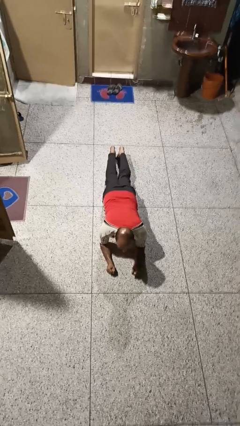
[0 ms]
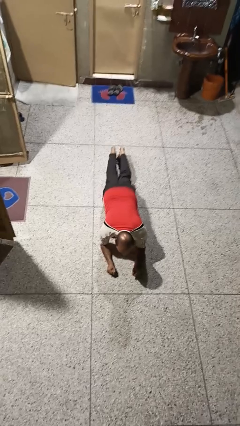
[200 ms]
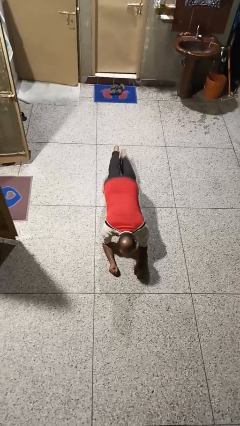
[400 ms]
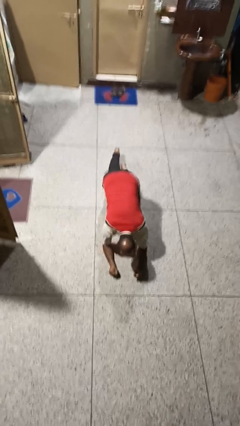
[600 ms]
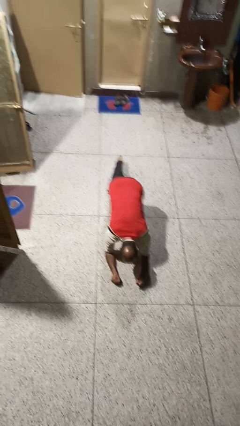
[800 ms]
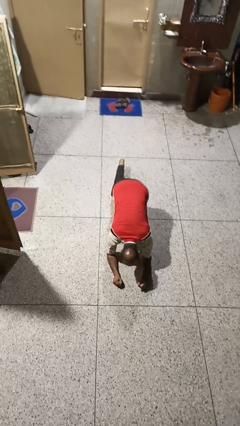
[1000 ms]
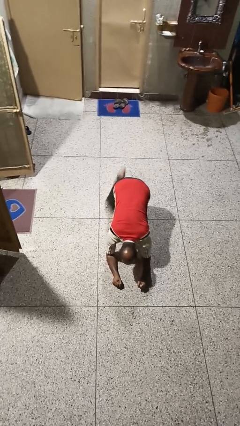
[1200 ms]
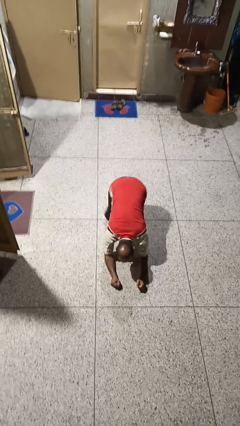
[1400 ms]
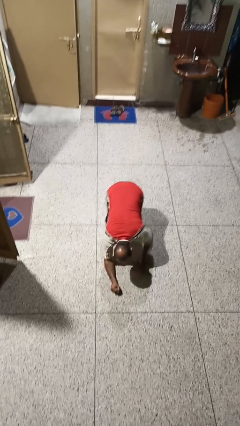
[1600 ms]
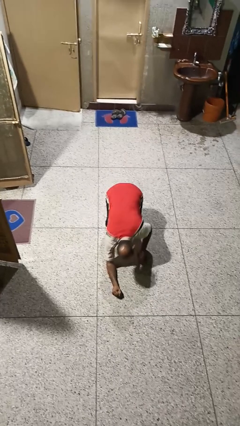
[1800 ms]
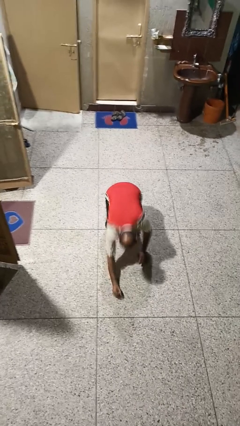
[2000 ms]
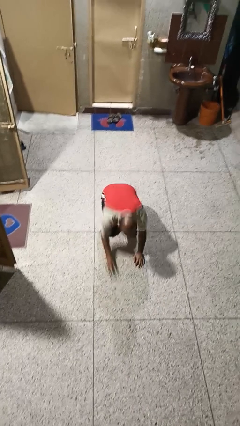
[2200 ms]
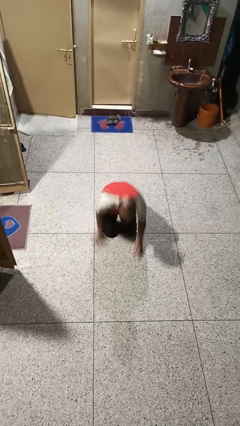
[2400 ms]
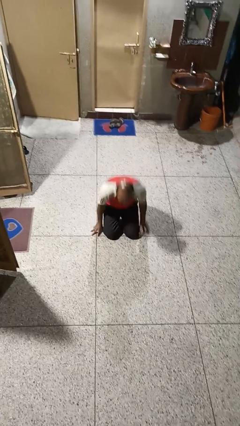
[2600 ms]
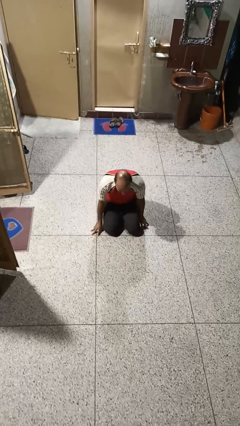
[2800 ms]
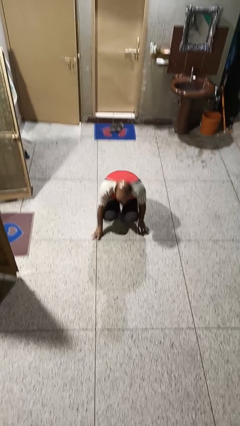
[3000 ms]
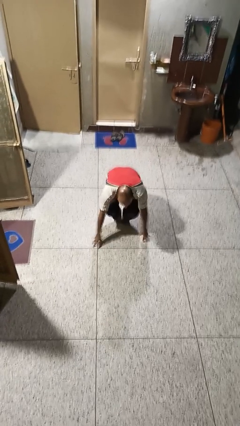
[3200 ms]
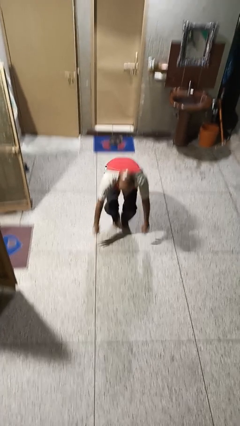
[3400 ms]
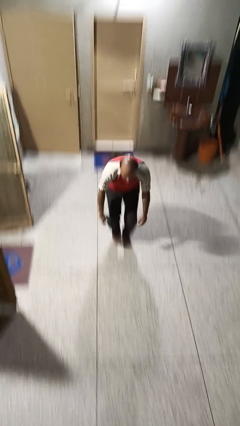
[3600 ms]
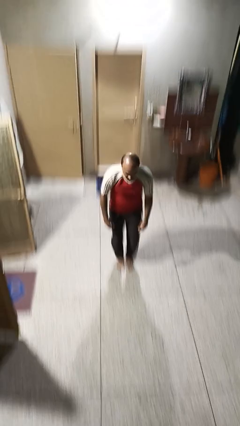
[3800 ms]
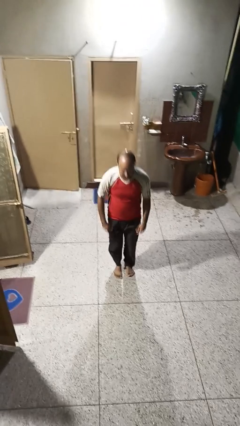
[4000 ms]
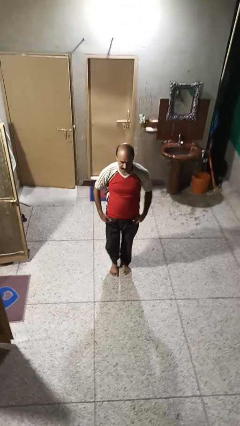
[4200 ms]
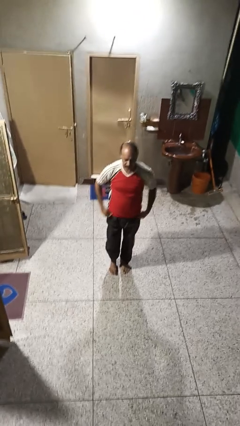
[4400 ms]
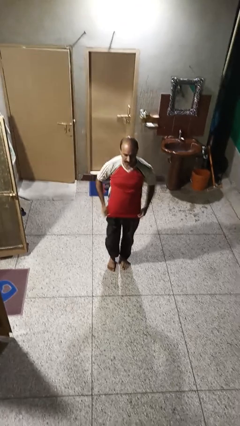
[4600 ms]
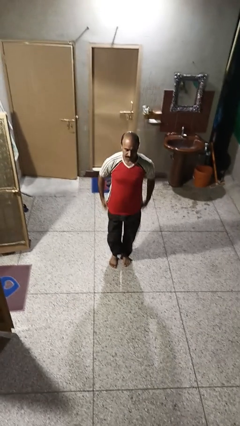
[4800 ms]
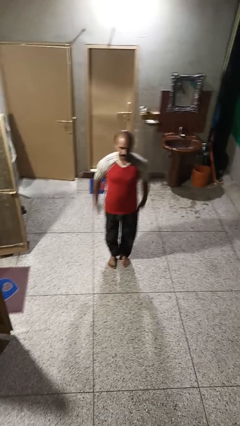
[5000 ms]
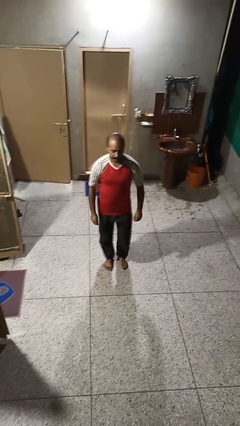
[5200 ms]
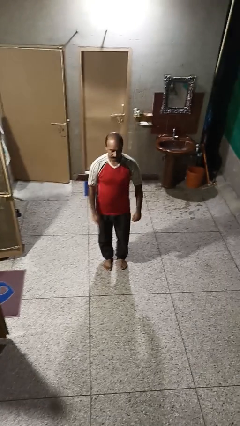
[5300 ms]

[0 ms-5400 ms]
person stands up from floor

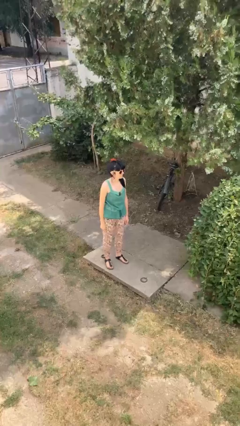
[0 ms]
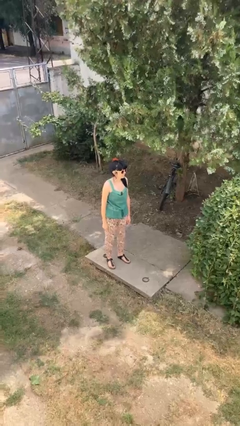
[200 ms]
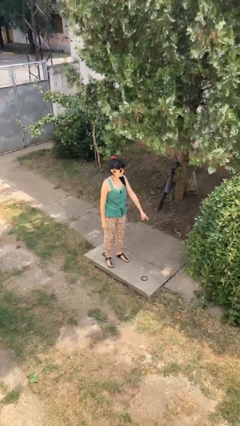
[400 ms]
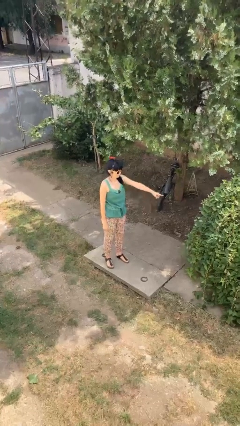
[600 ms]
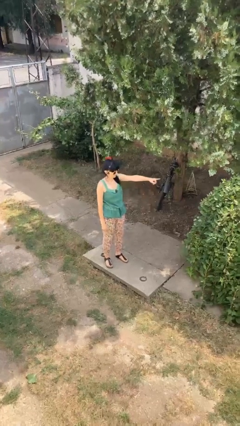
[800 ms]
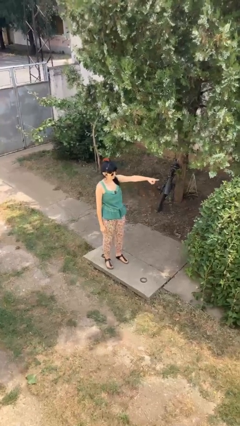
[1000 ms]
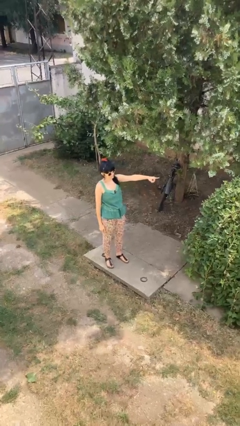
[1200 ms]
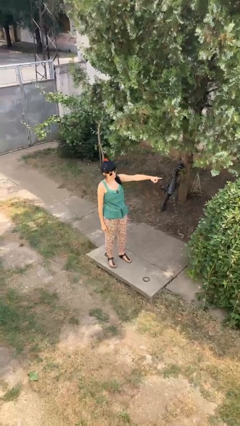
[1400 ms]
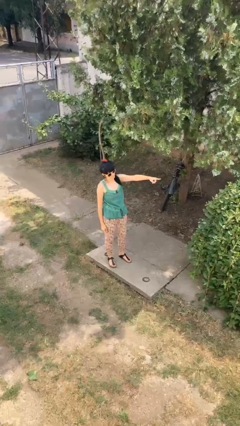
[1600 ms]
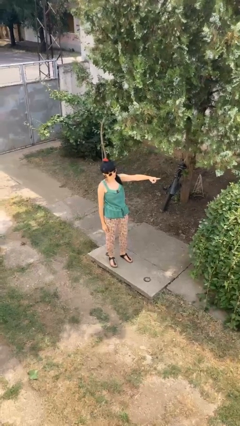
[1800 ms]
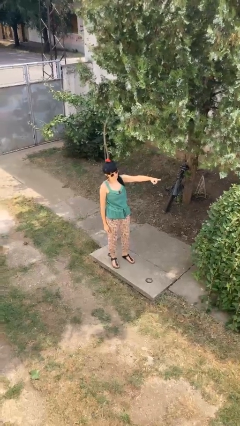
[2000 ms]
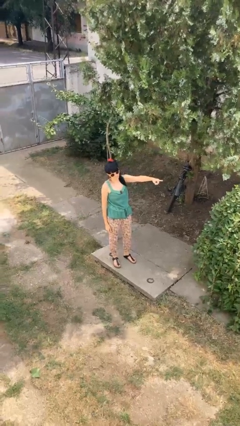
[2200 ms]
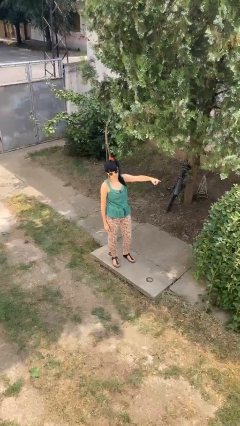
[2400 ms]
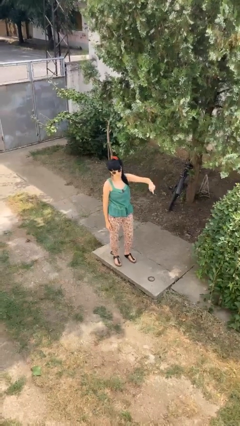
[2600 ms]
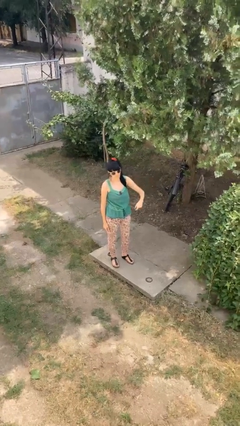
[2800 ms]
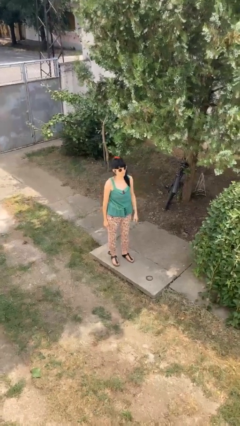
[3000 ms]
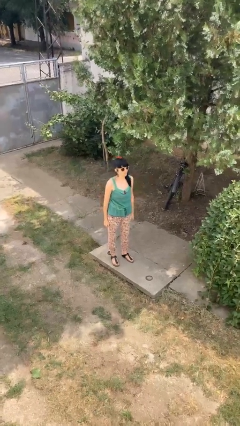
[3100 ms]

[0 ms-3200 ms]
person points at person

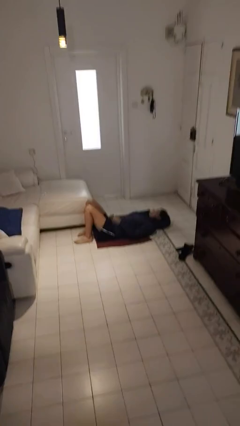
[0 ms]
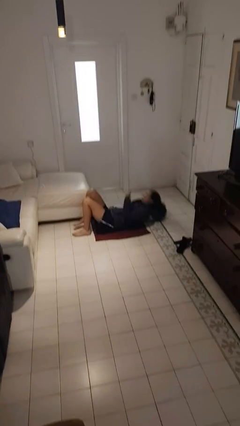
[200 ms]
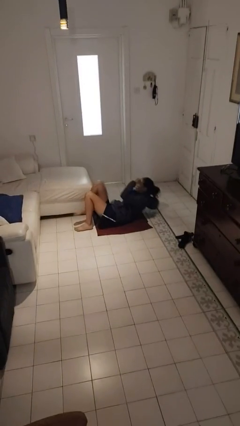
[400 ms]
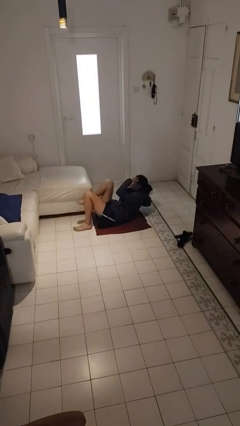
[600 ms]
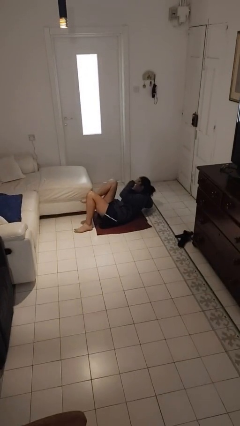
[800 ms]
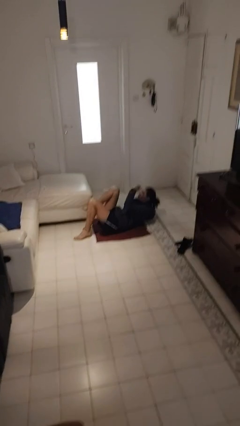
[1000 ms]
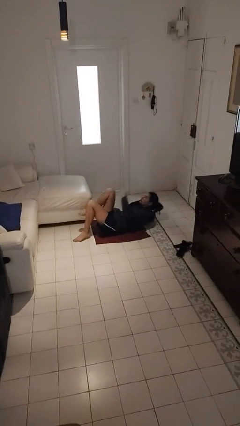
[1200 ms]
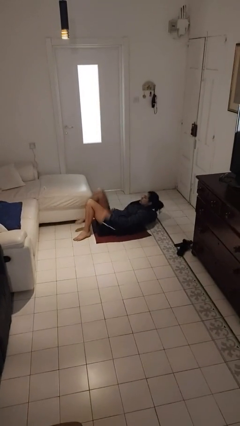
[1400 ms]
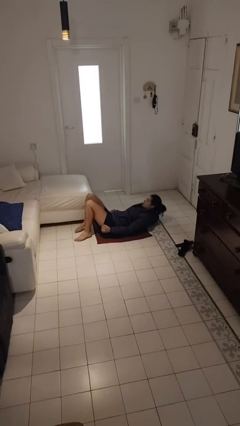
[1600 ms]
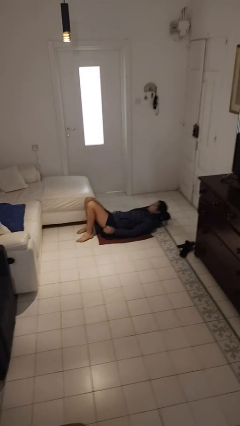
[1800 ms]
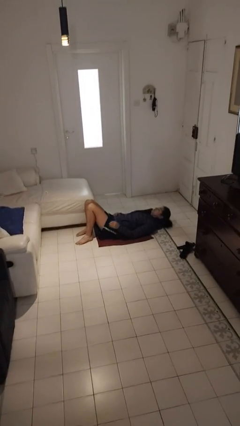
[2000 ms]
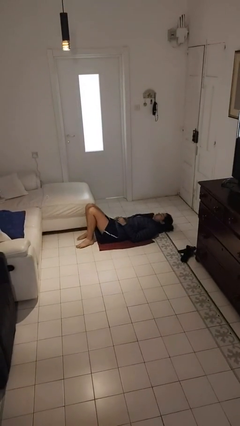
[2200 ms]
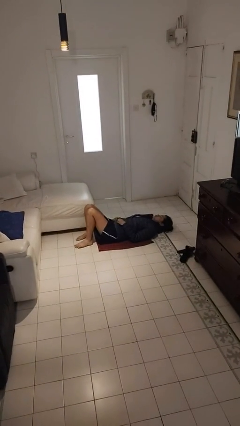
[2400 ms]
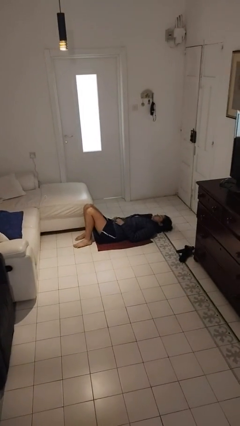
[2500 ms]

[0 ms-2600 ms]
person exercises with situp

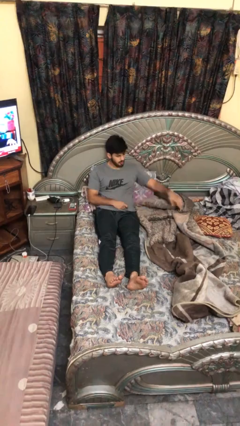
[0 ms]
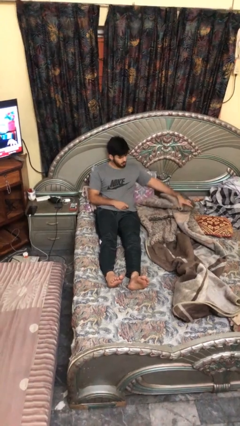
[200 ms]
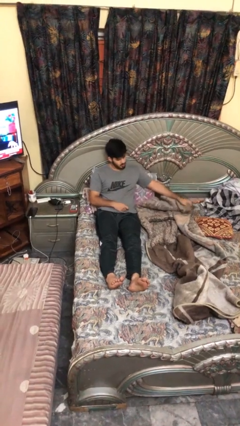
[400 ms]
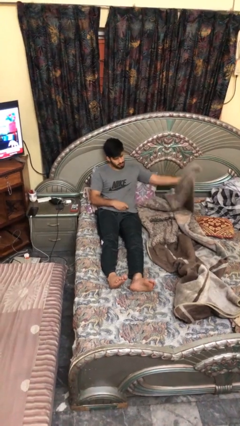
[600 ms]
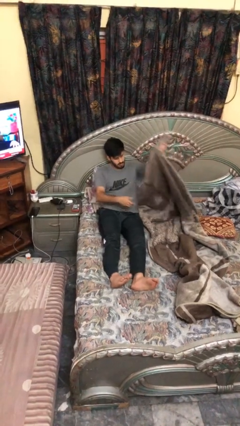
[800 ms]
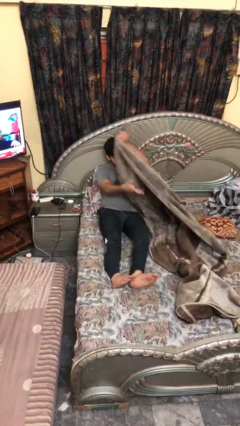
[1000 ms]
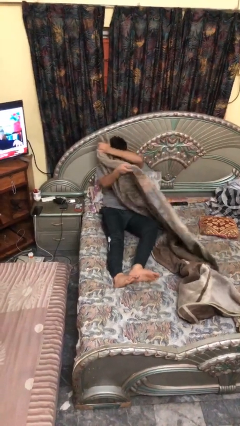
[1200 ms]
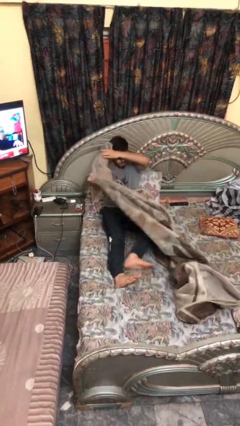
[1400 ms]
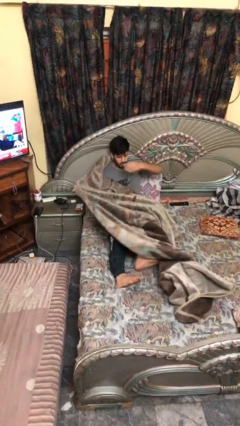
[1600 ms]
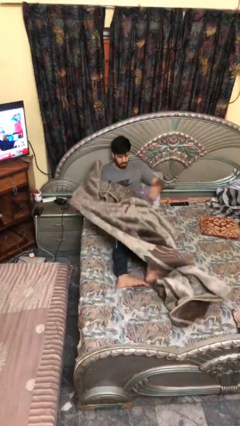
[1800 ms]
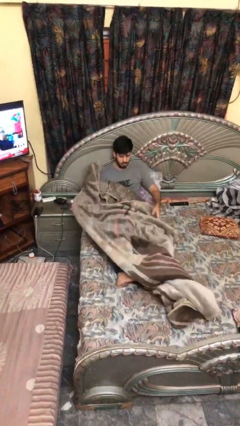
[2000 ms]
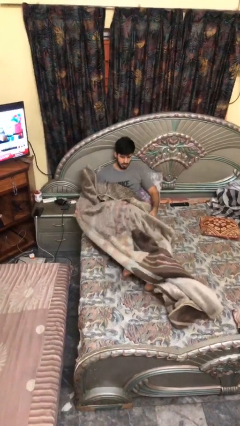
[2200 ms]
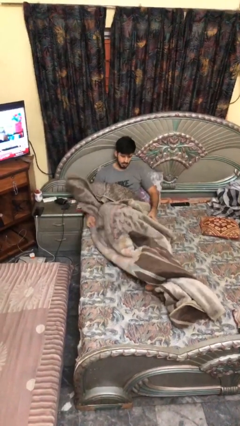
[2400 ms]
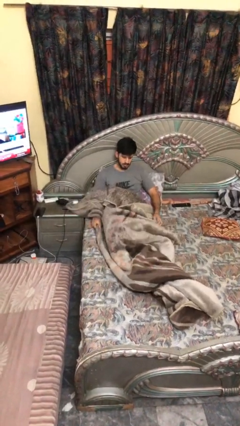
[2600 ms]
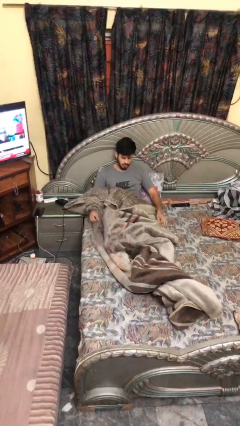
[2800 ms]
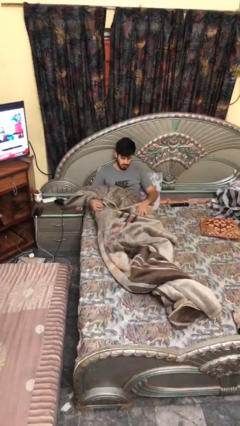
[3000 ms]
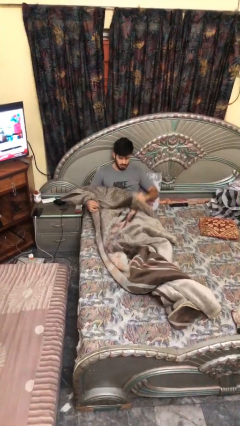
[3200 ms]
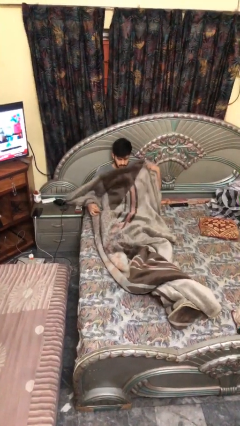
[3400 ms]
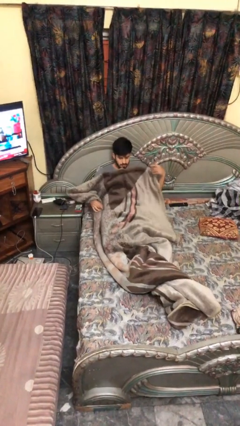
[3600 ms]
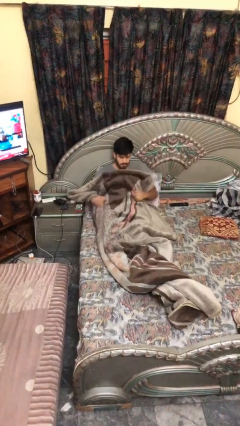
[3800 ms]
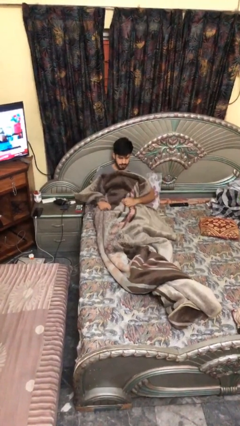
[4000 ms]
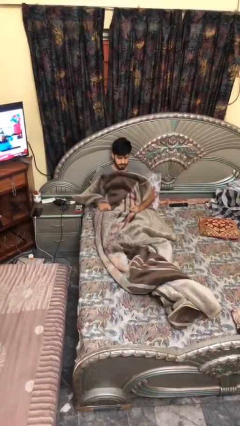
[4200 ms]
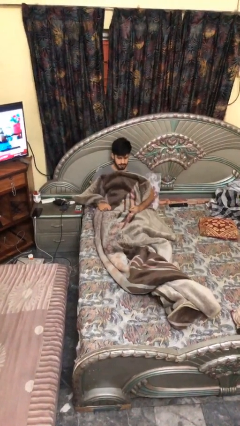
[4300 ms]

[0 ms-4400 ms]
person covers with blanket

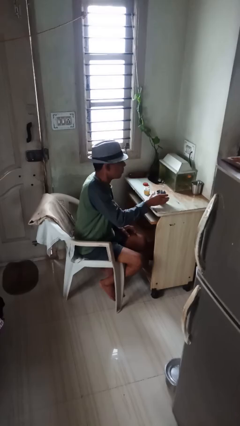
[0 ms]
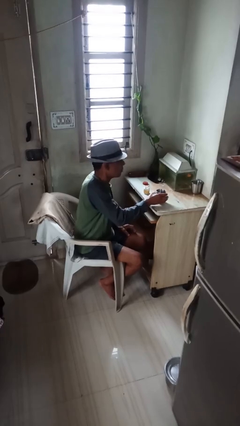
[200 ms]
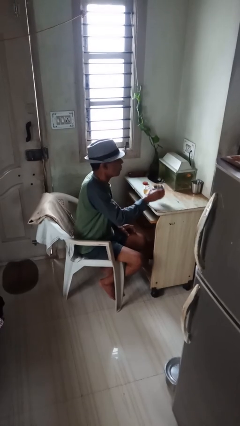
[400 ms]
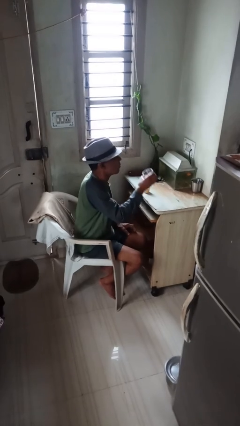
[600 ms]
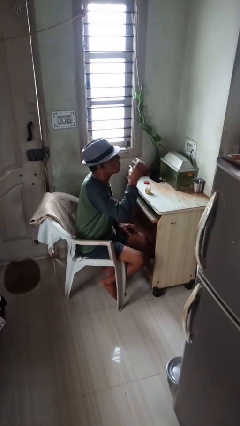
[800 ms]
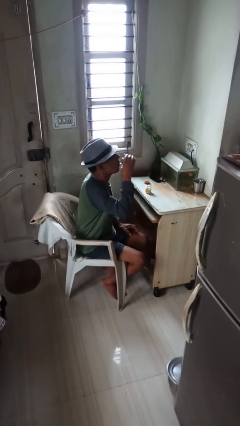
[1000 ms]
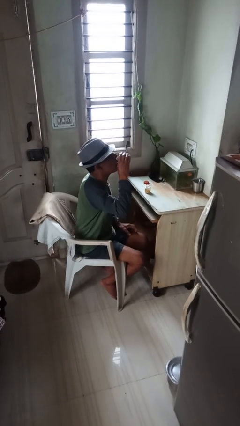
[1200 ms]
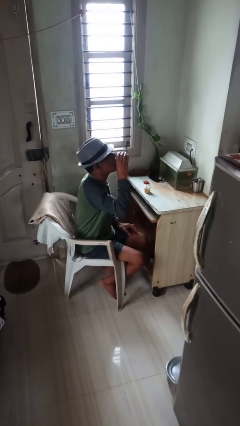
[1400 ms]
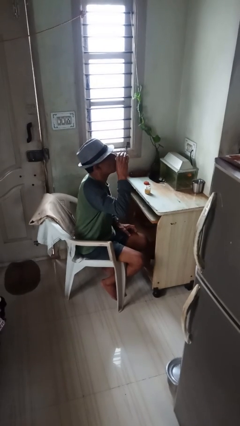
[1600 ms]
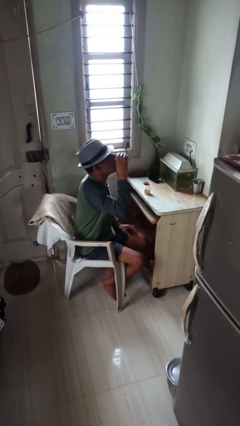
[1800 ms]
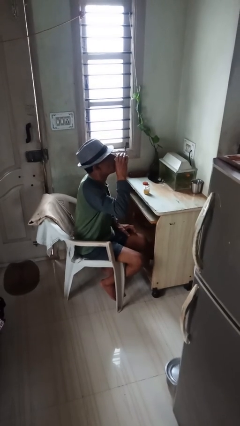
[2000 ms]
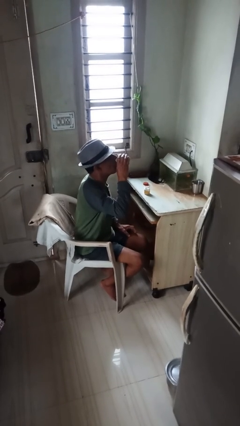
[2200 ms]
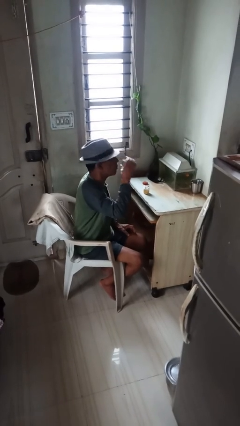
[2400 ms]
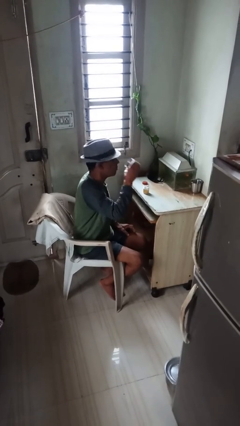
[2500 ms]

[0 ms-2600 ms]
person drinks from cup
